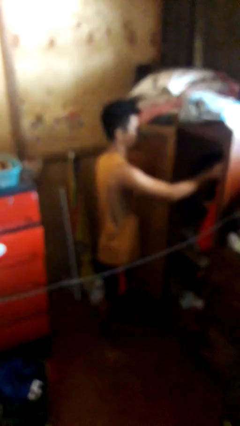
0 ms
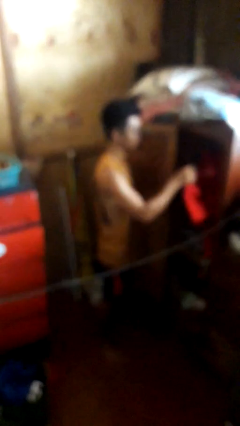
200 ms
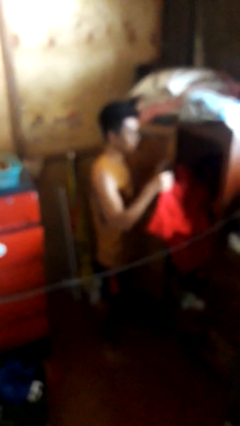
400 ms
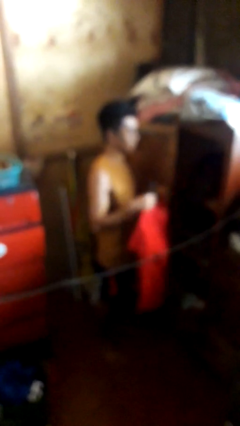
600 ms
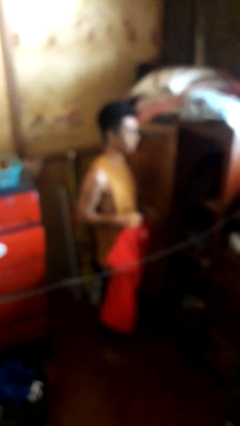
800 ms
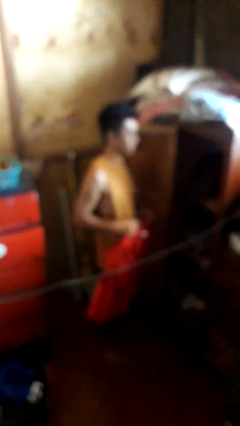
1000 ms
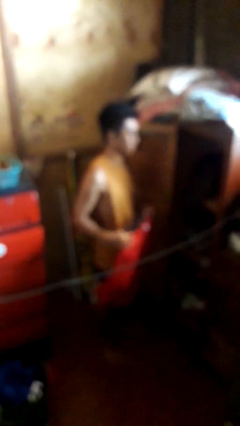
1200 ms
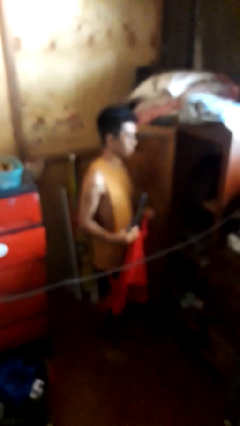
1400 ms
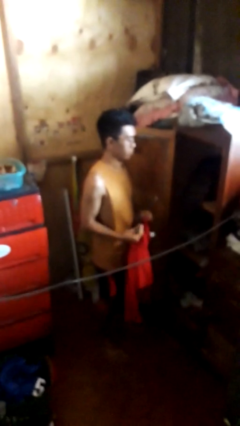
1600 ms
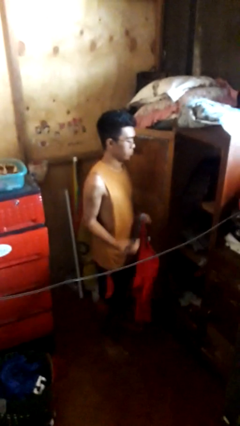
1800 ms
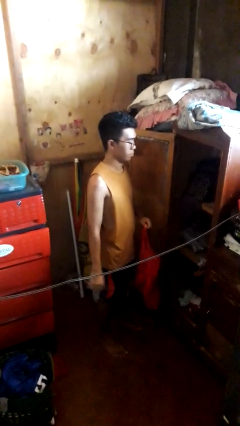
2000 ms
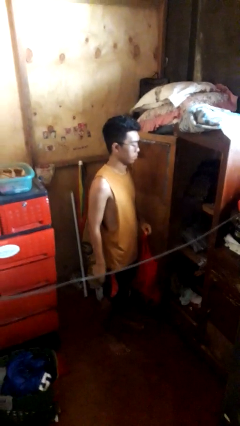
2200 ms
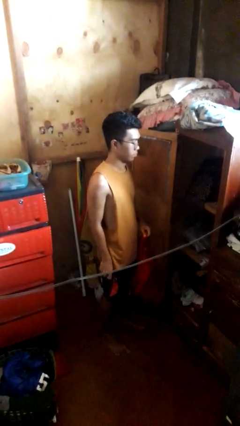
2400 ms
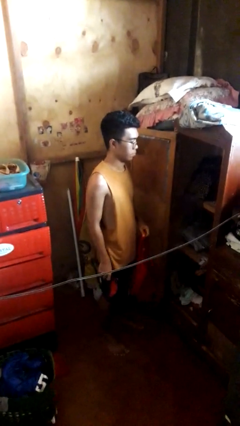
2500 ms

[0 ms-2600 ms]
person takes clothes from closet

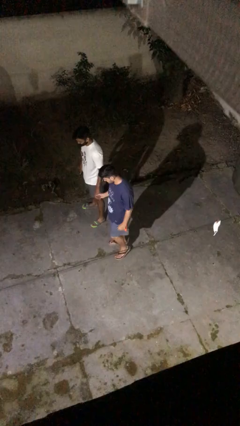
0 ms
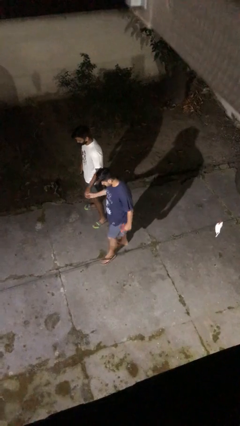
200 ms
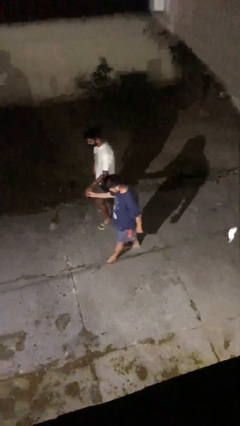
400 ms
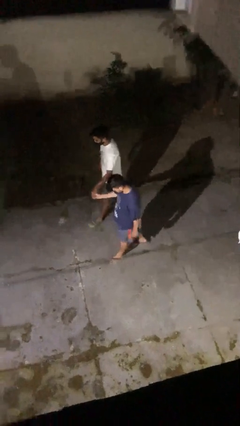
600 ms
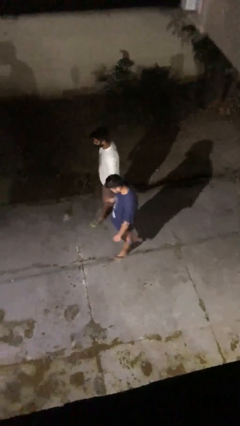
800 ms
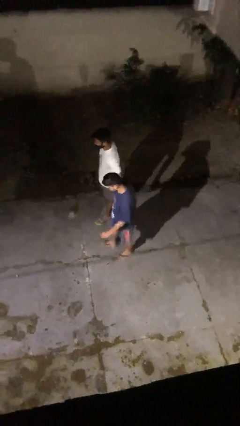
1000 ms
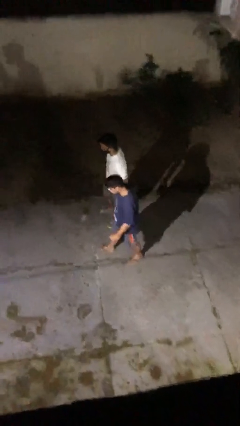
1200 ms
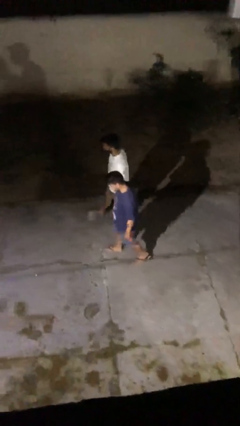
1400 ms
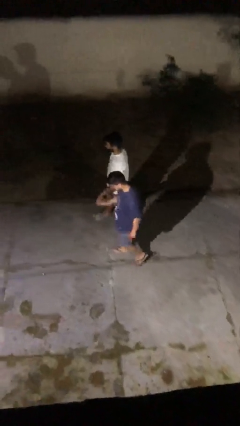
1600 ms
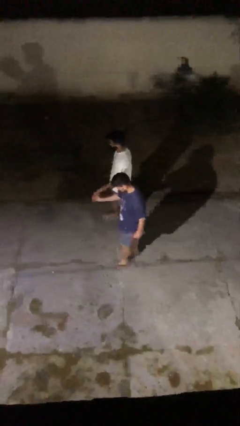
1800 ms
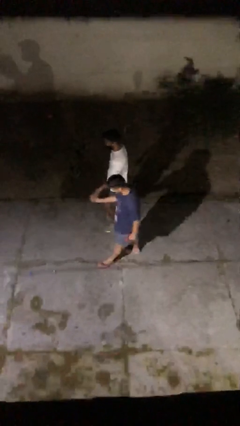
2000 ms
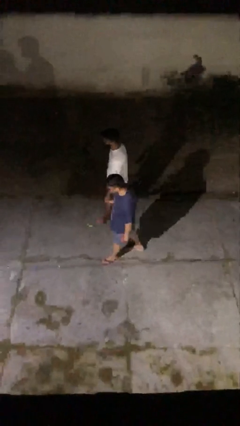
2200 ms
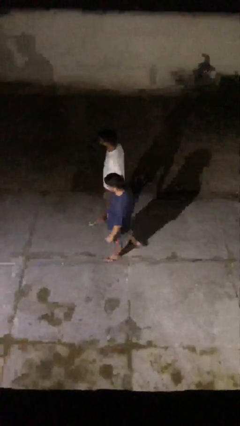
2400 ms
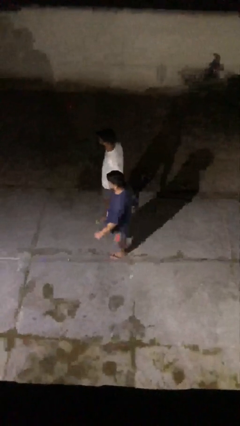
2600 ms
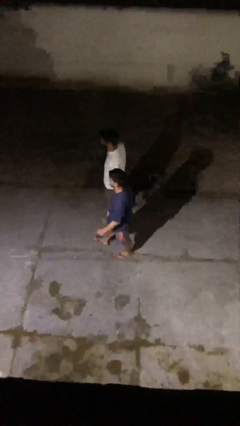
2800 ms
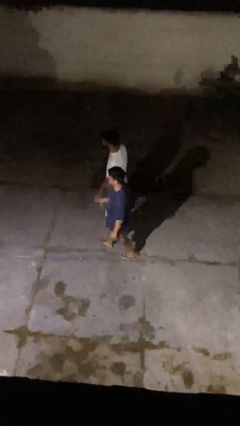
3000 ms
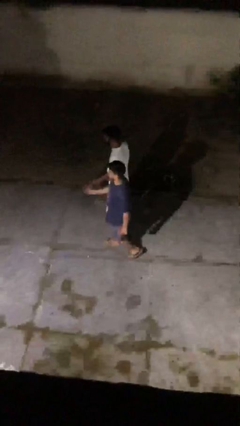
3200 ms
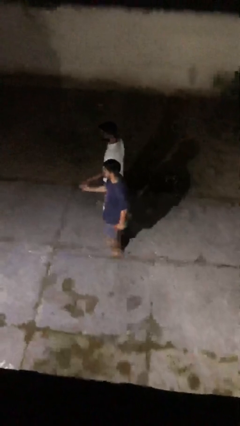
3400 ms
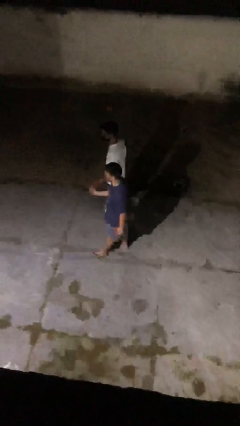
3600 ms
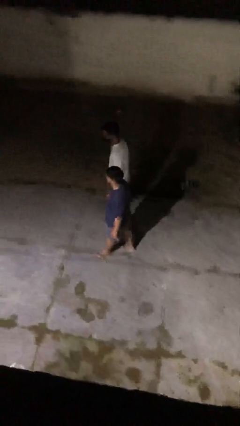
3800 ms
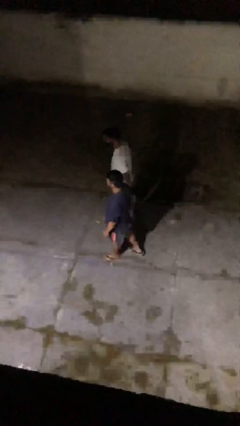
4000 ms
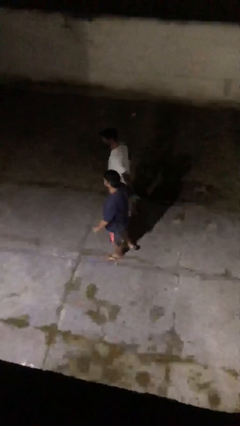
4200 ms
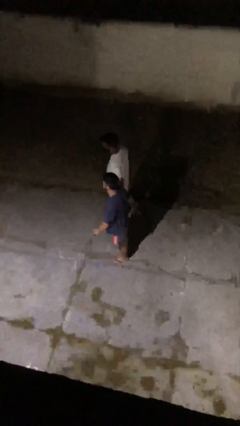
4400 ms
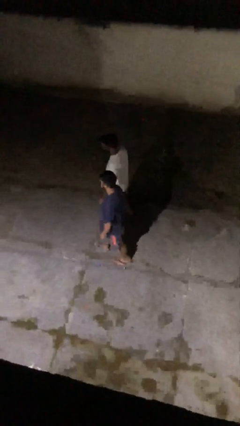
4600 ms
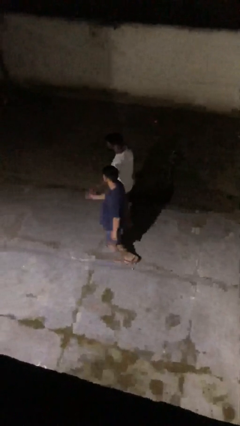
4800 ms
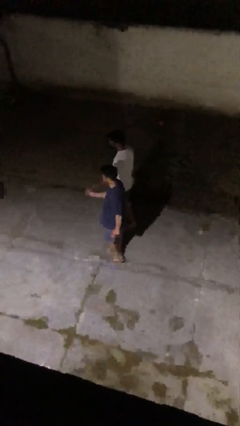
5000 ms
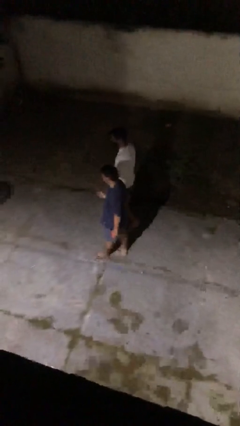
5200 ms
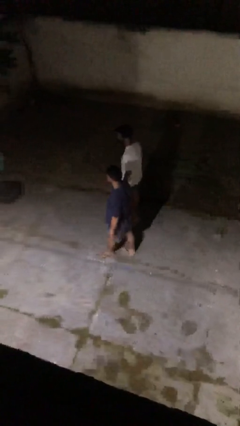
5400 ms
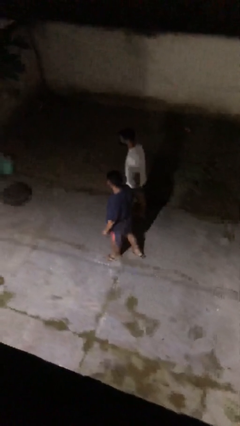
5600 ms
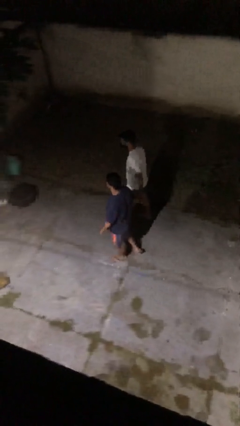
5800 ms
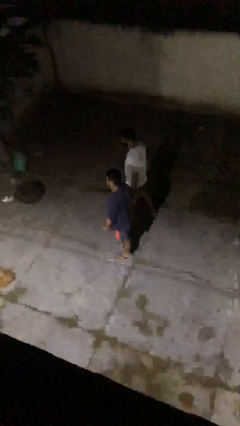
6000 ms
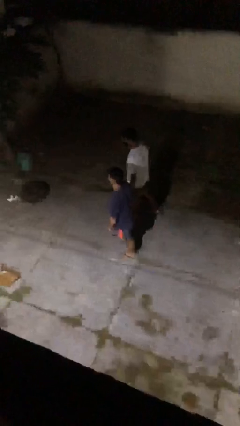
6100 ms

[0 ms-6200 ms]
person holds hand

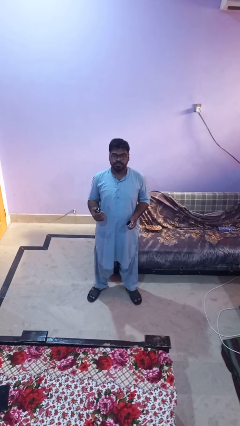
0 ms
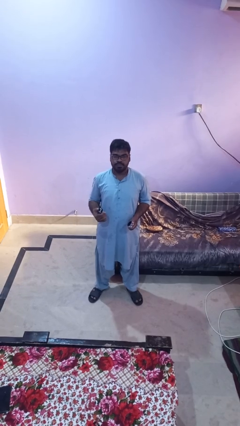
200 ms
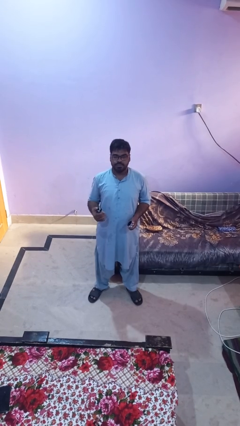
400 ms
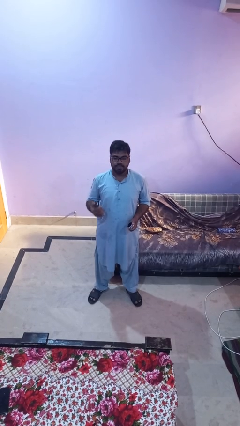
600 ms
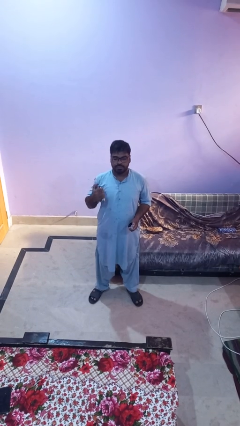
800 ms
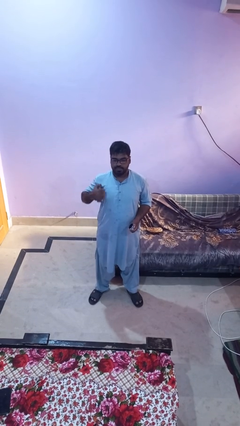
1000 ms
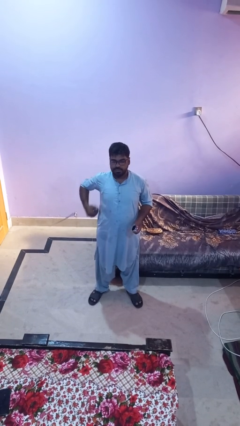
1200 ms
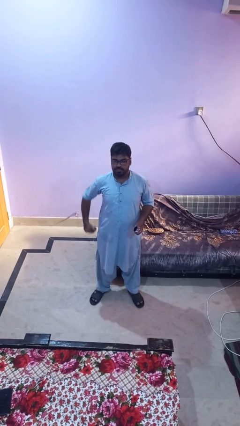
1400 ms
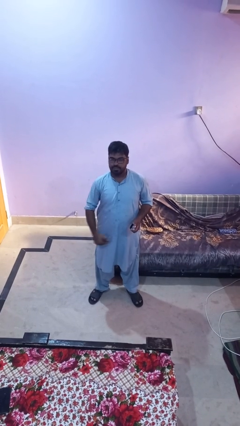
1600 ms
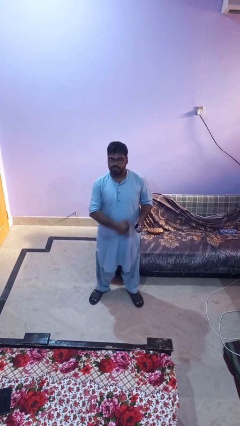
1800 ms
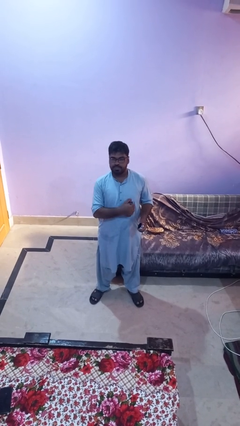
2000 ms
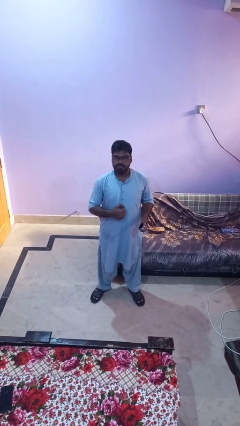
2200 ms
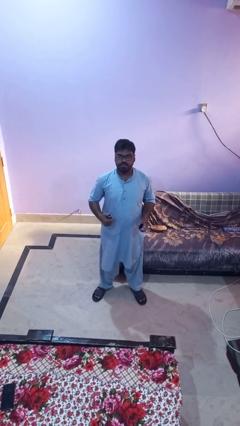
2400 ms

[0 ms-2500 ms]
person applies deodorant

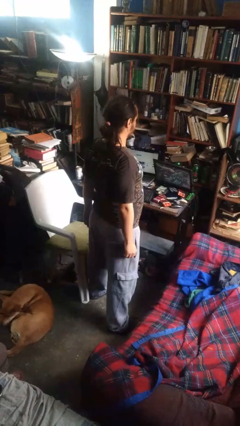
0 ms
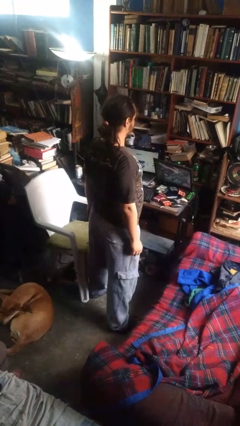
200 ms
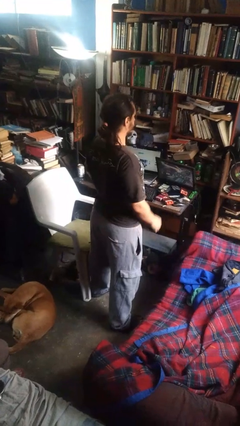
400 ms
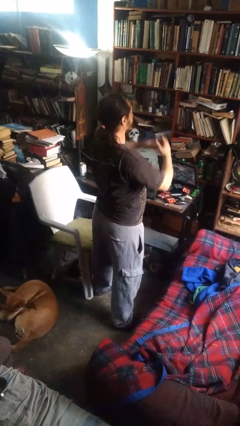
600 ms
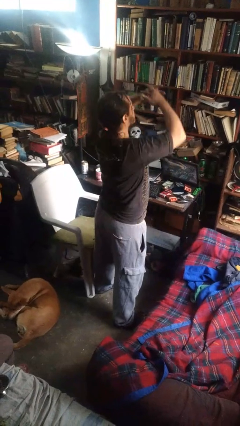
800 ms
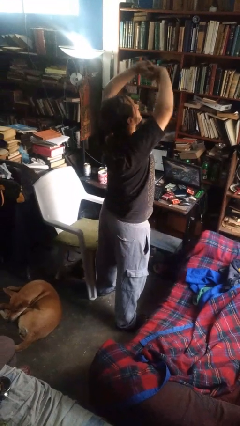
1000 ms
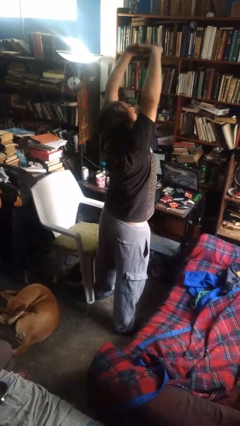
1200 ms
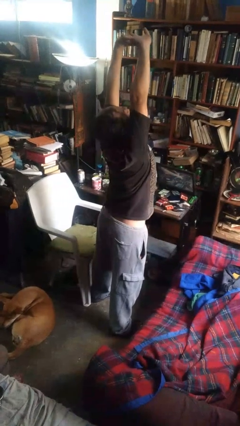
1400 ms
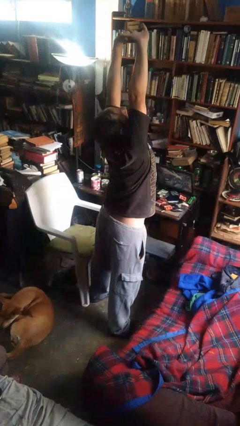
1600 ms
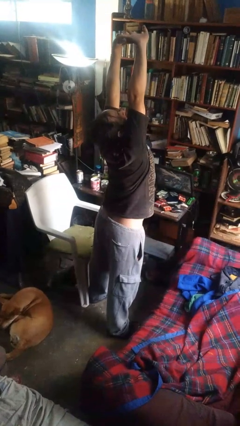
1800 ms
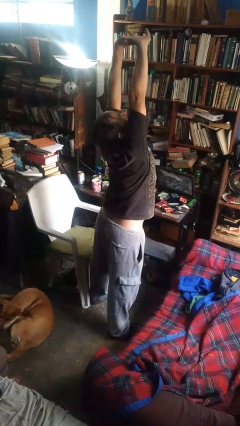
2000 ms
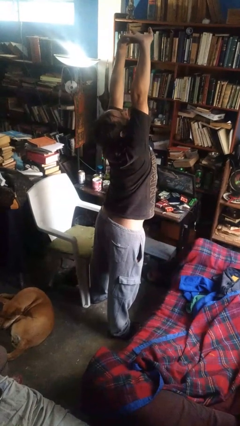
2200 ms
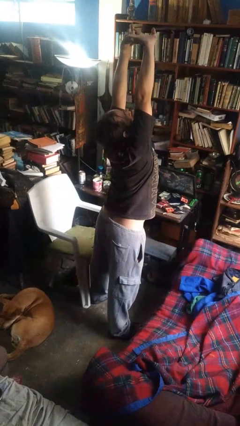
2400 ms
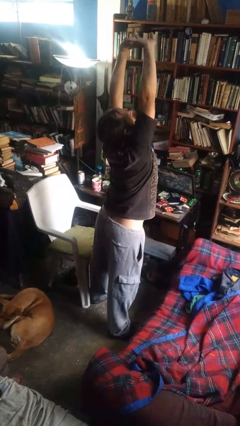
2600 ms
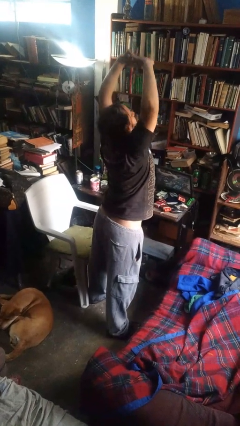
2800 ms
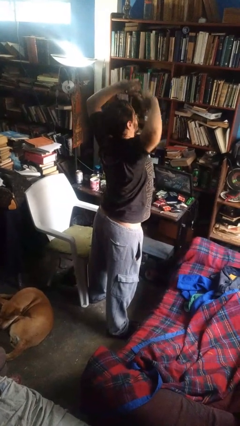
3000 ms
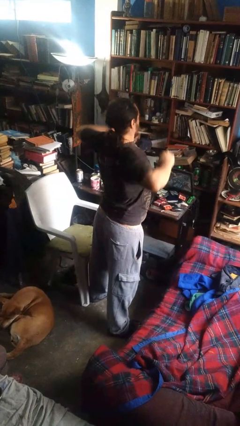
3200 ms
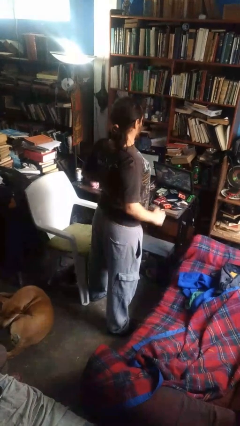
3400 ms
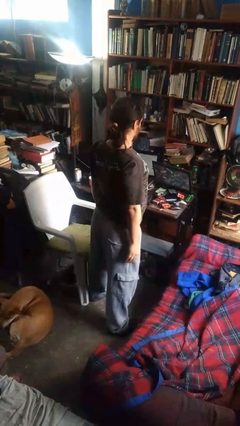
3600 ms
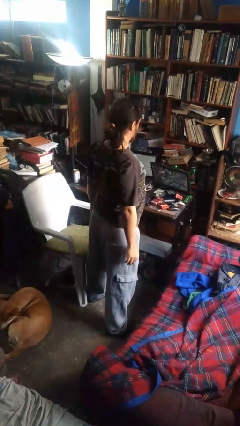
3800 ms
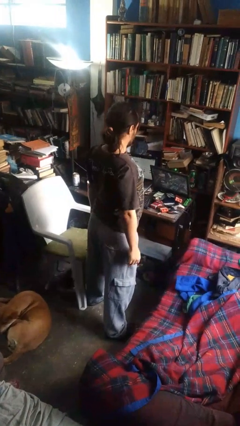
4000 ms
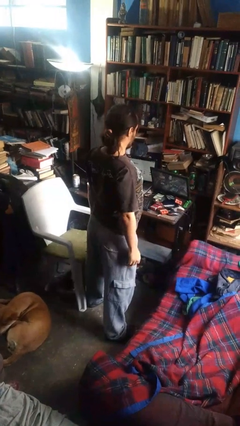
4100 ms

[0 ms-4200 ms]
person stretches arms over head

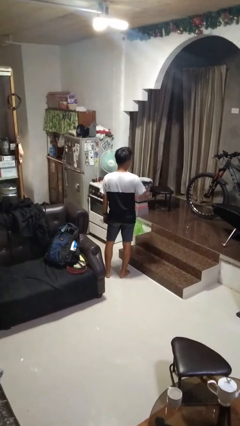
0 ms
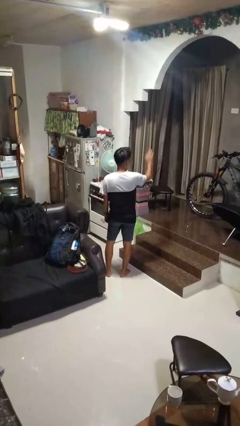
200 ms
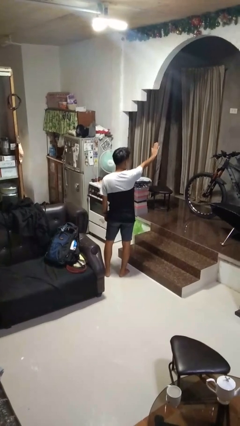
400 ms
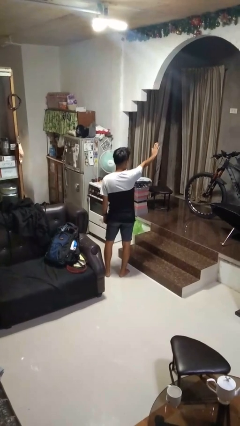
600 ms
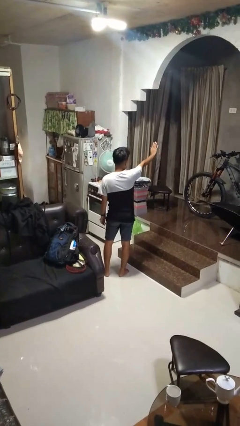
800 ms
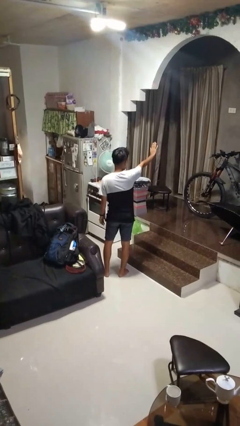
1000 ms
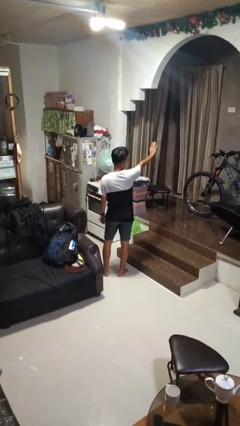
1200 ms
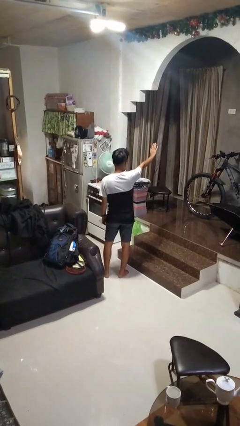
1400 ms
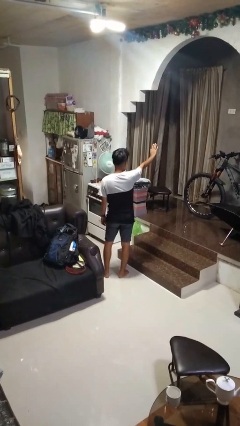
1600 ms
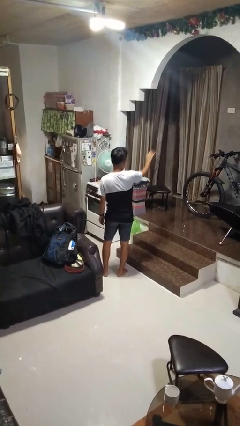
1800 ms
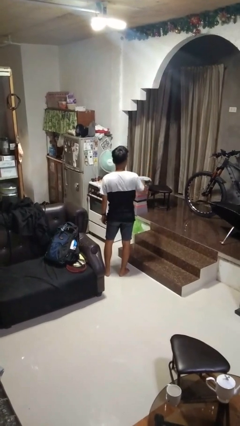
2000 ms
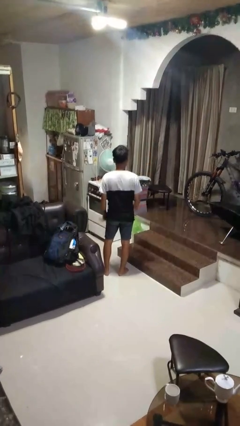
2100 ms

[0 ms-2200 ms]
person gestures stop

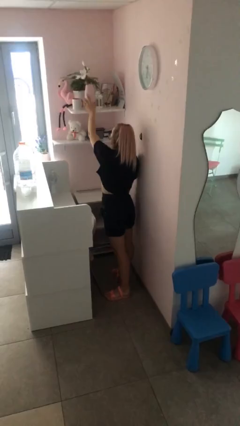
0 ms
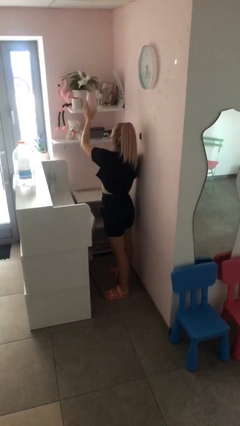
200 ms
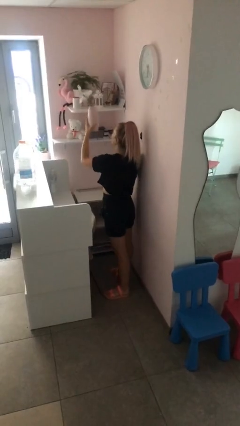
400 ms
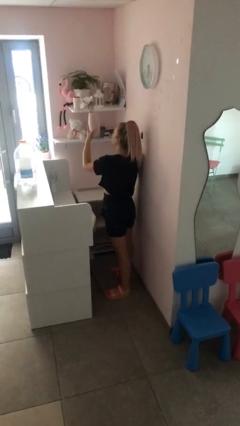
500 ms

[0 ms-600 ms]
person picks up object from cabinet
